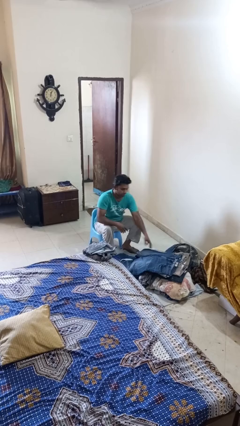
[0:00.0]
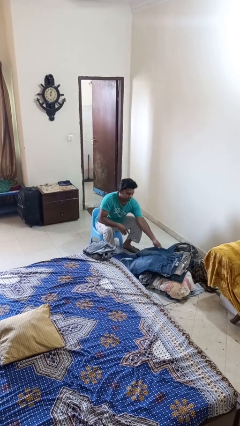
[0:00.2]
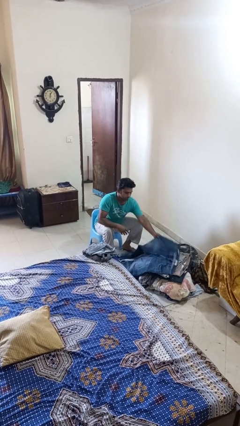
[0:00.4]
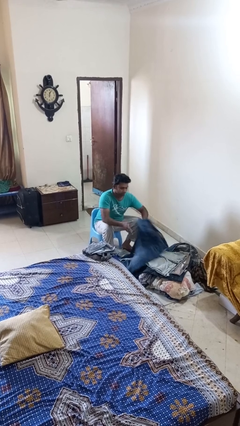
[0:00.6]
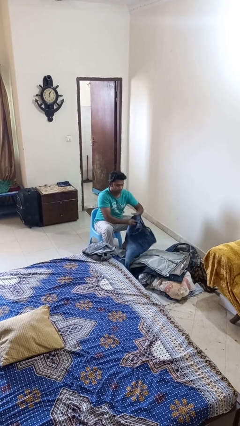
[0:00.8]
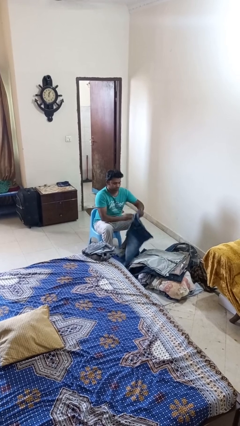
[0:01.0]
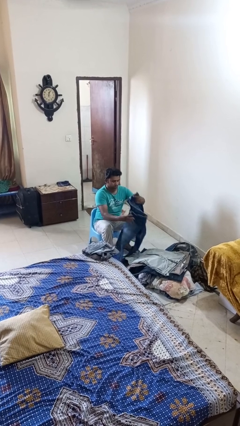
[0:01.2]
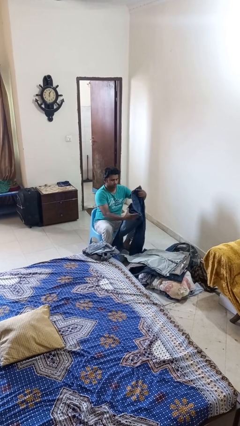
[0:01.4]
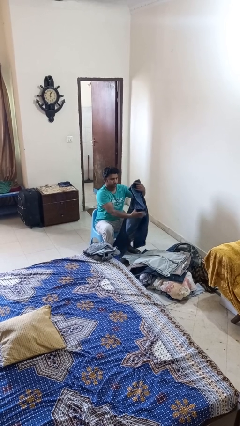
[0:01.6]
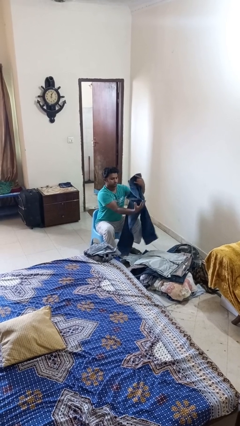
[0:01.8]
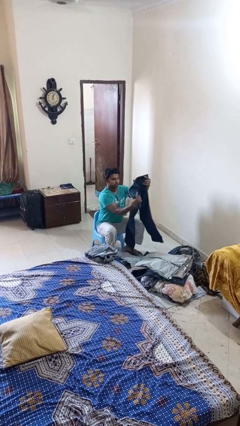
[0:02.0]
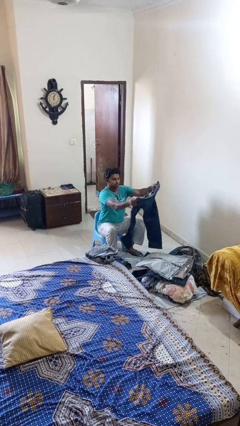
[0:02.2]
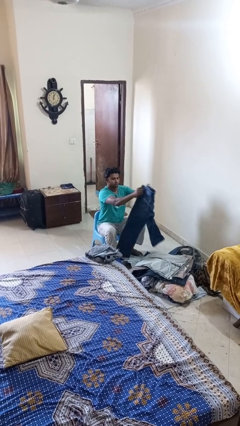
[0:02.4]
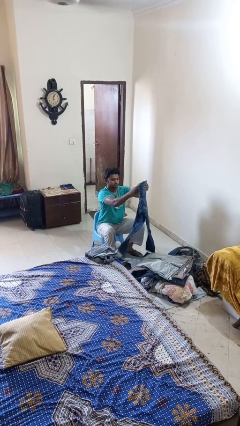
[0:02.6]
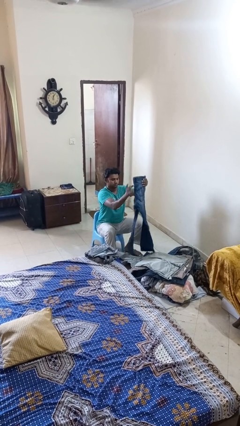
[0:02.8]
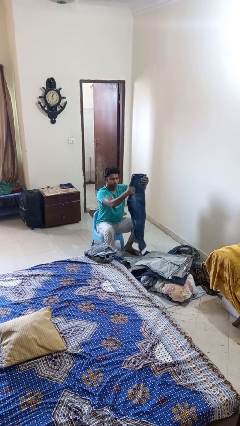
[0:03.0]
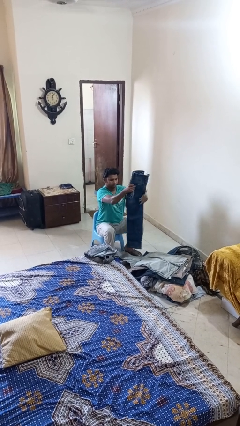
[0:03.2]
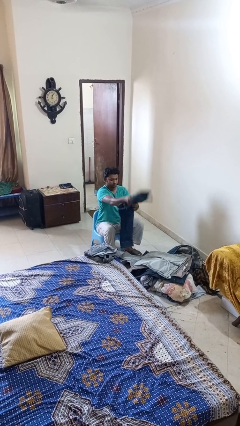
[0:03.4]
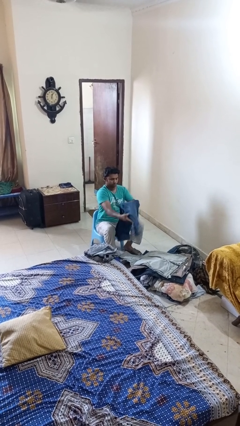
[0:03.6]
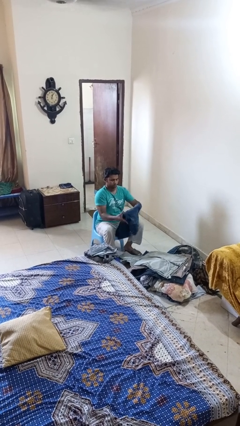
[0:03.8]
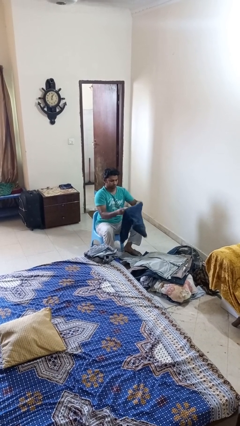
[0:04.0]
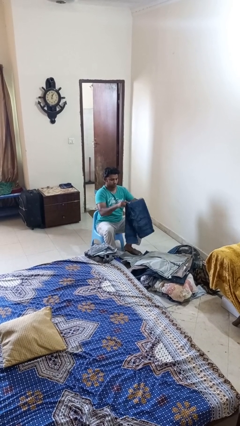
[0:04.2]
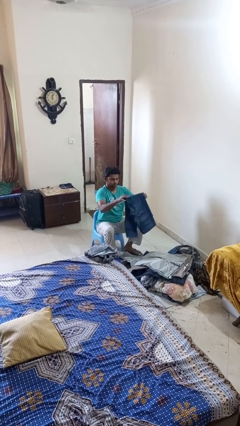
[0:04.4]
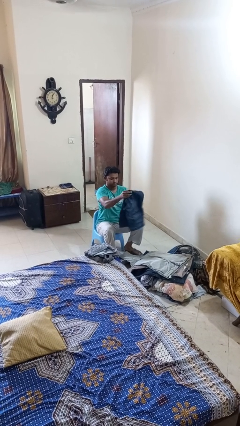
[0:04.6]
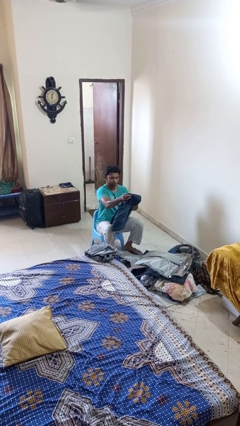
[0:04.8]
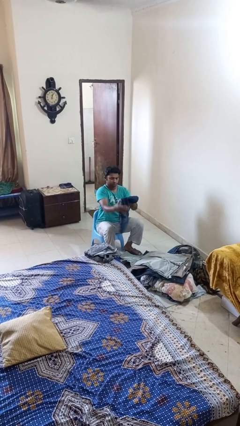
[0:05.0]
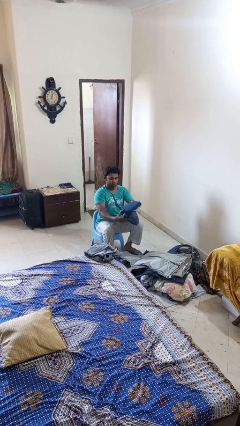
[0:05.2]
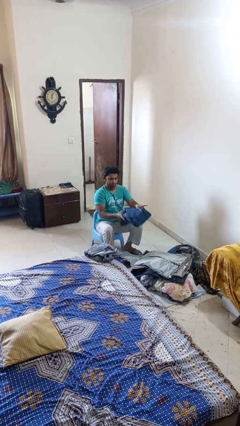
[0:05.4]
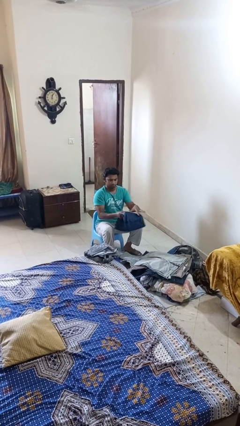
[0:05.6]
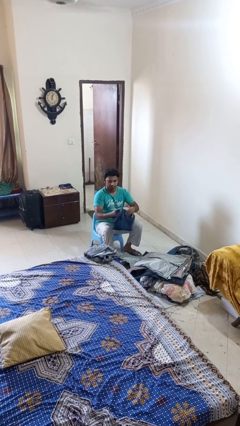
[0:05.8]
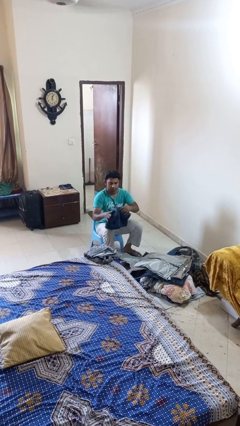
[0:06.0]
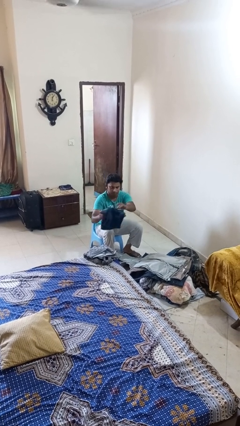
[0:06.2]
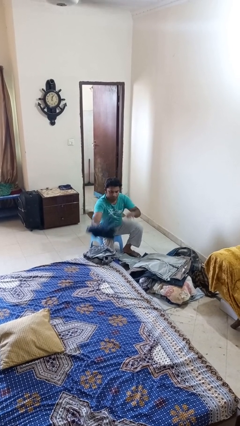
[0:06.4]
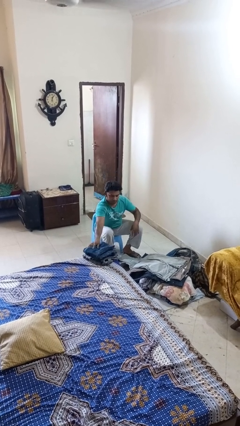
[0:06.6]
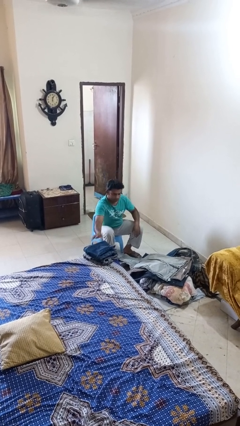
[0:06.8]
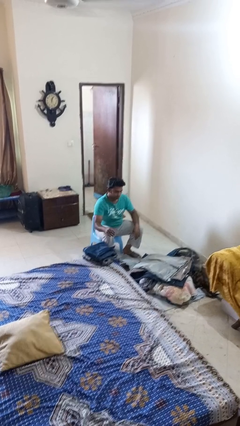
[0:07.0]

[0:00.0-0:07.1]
person folds pants

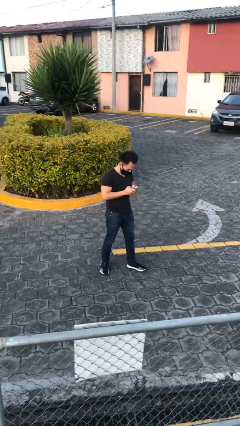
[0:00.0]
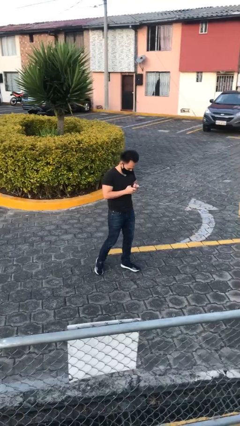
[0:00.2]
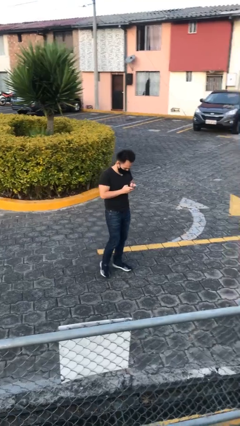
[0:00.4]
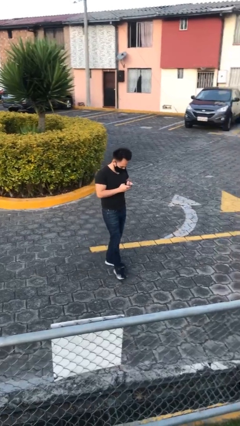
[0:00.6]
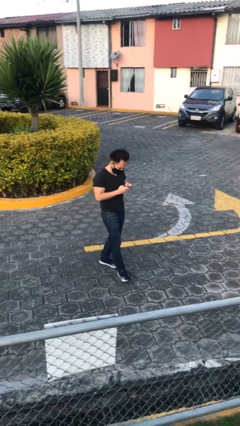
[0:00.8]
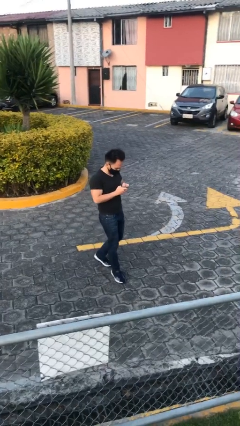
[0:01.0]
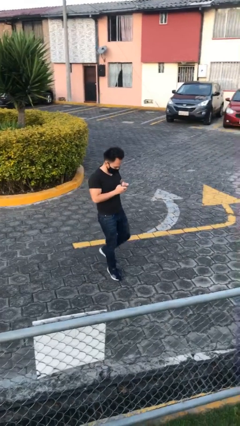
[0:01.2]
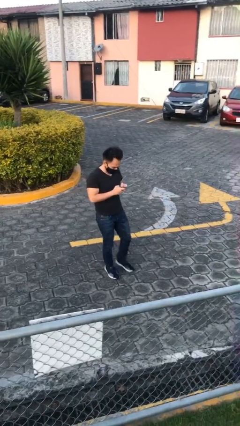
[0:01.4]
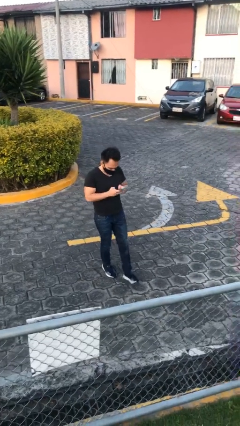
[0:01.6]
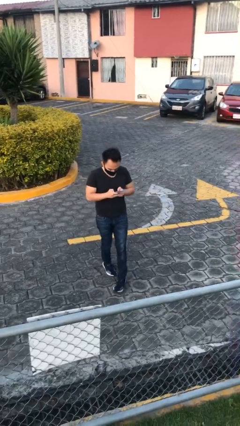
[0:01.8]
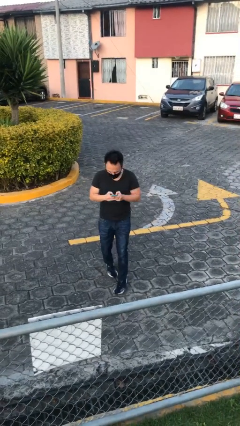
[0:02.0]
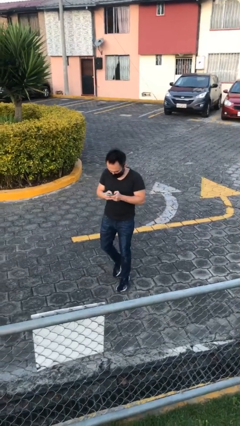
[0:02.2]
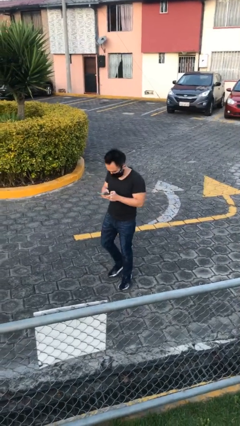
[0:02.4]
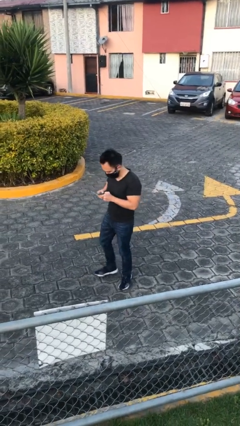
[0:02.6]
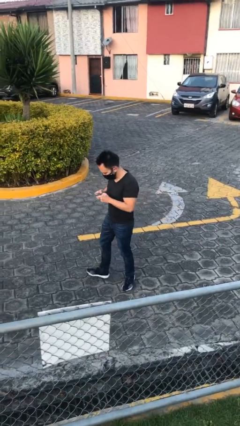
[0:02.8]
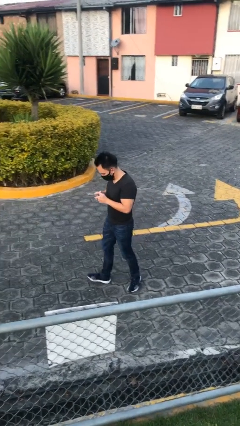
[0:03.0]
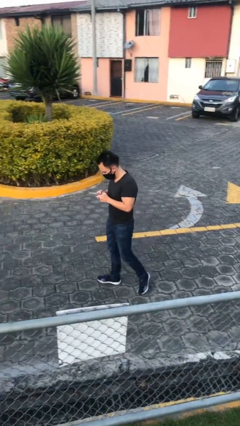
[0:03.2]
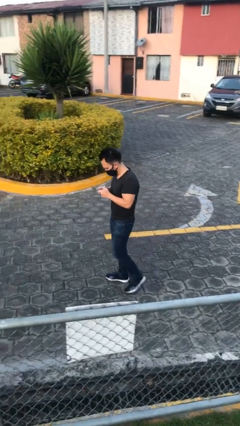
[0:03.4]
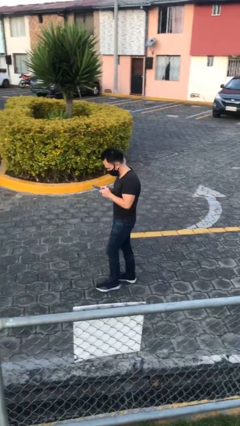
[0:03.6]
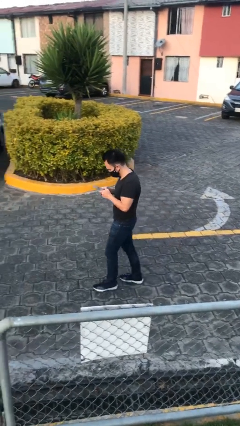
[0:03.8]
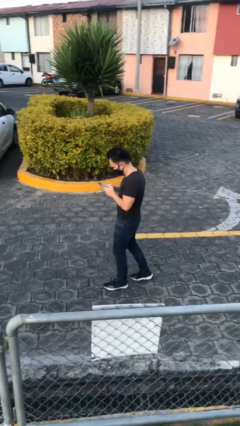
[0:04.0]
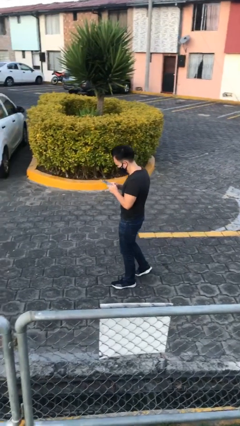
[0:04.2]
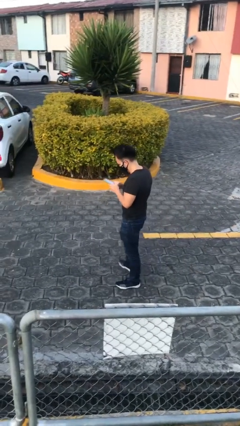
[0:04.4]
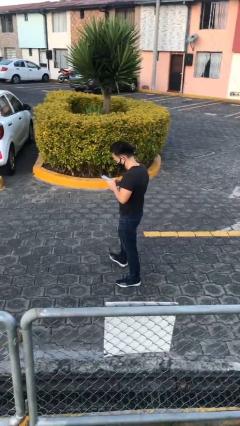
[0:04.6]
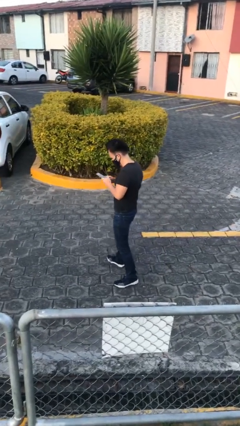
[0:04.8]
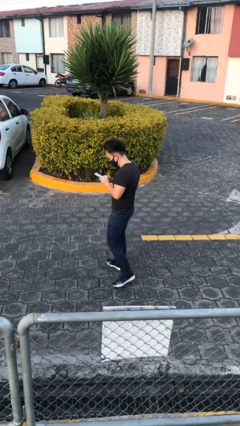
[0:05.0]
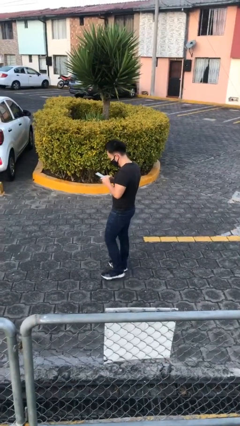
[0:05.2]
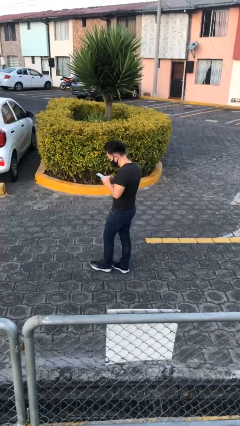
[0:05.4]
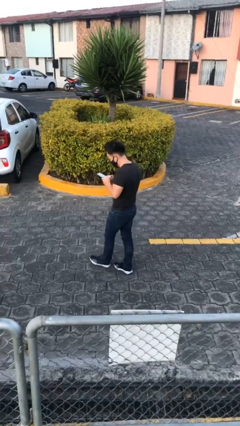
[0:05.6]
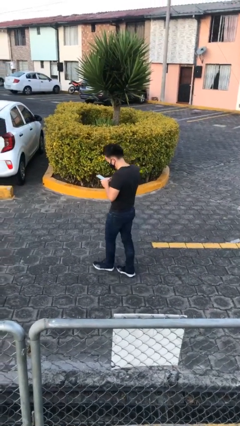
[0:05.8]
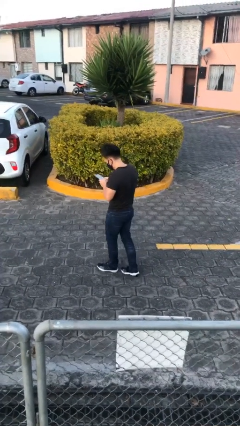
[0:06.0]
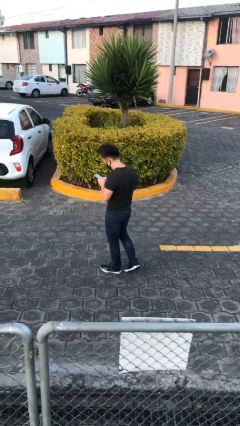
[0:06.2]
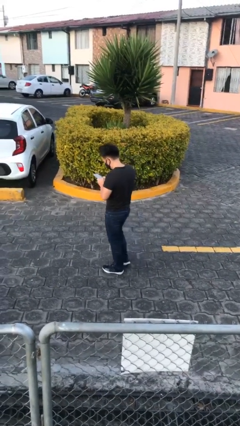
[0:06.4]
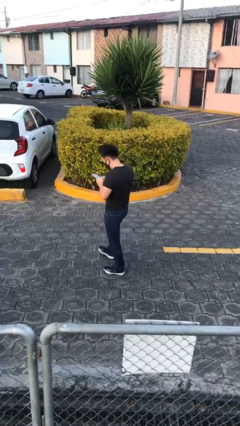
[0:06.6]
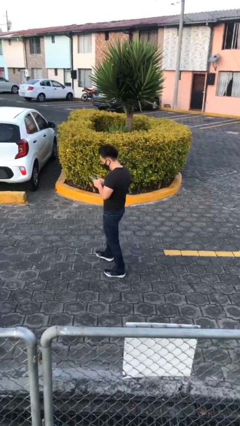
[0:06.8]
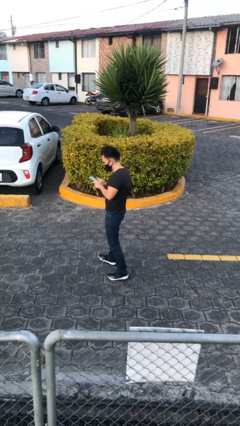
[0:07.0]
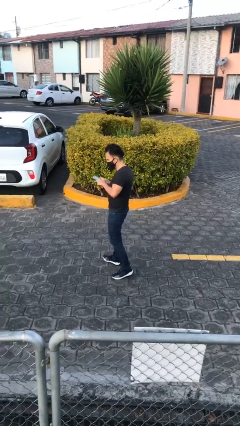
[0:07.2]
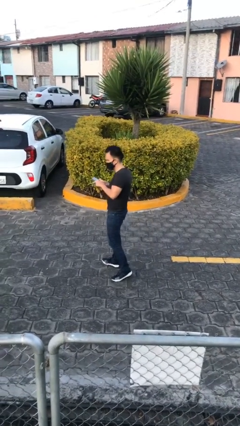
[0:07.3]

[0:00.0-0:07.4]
person texts on phone

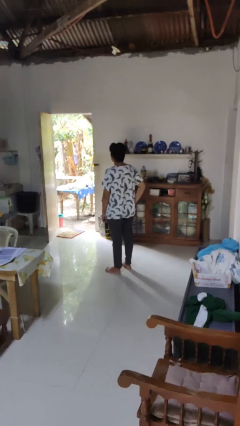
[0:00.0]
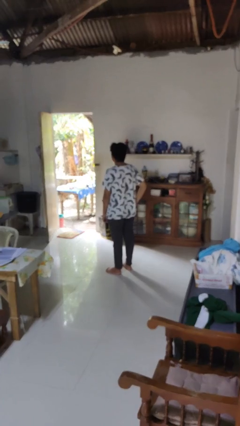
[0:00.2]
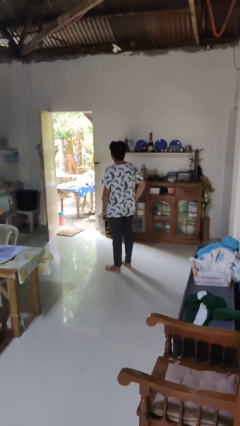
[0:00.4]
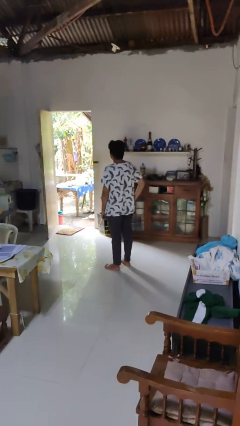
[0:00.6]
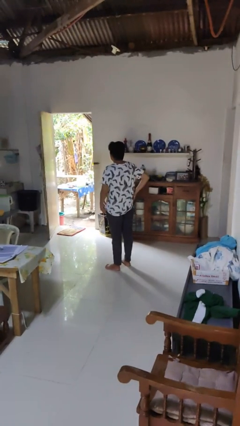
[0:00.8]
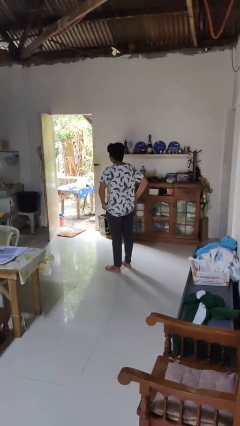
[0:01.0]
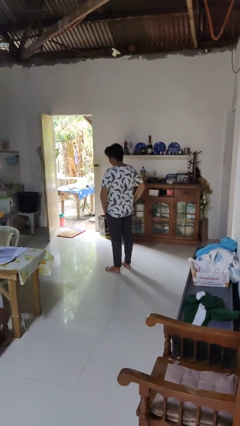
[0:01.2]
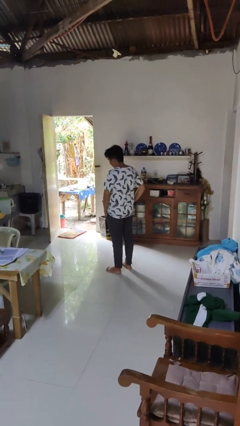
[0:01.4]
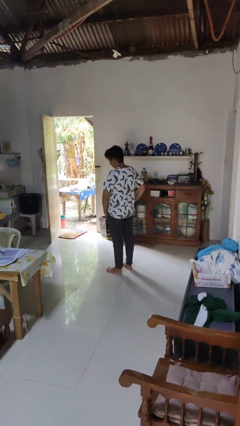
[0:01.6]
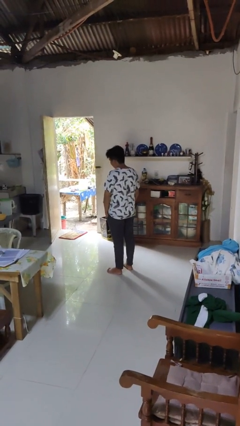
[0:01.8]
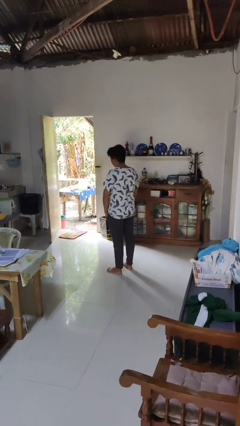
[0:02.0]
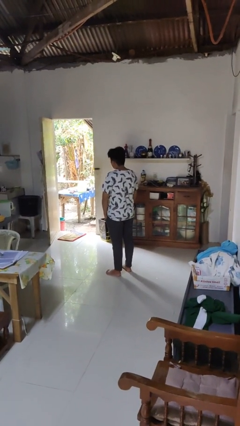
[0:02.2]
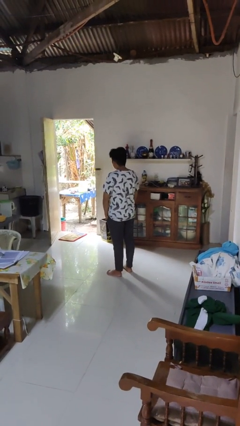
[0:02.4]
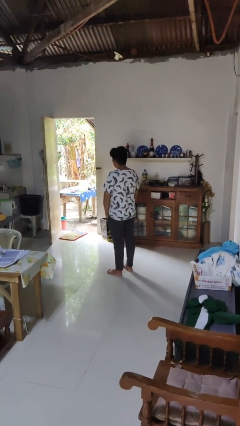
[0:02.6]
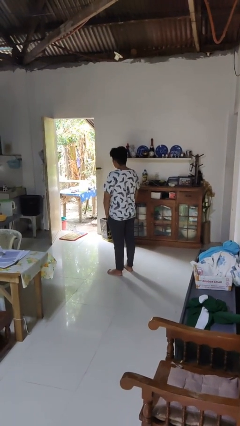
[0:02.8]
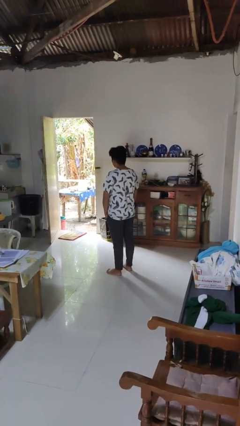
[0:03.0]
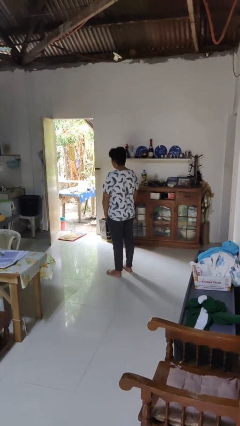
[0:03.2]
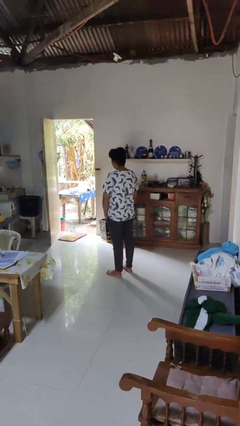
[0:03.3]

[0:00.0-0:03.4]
person puts hands in back pockets
